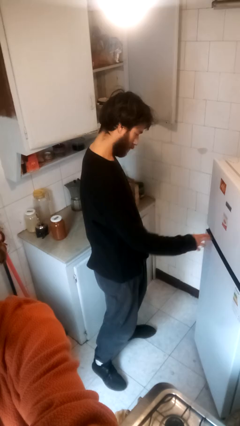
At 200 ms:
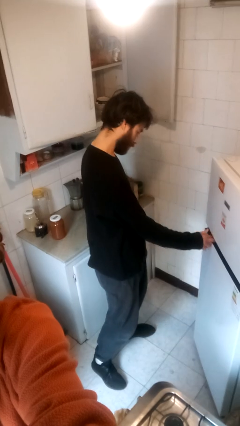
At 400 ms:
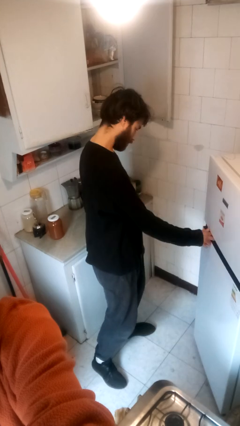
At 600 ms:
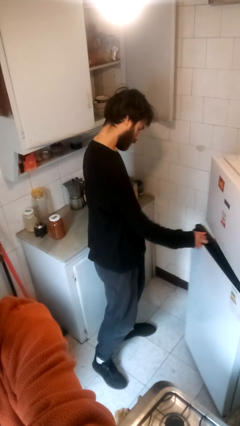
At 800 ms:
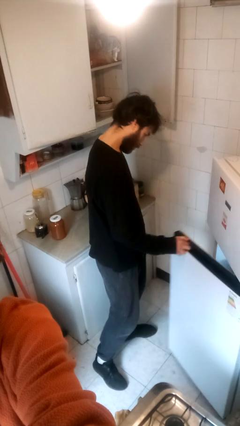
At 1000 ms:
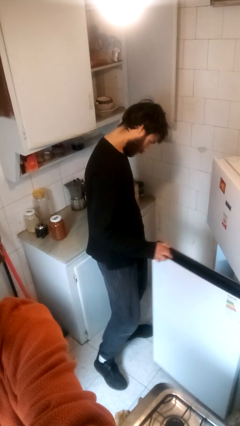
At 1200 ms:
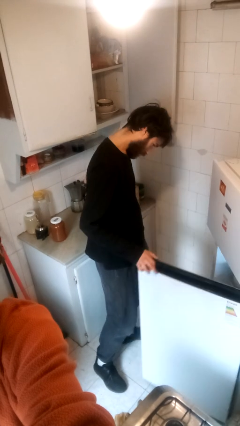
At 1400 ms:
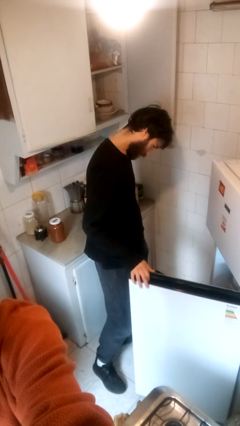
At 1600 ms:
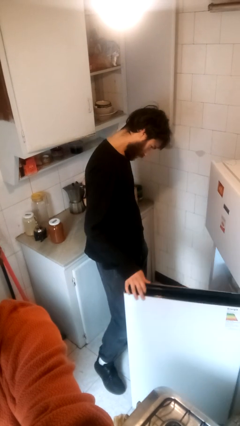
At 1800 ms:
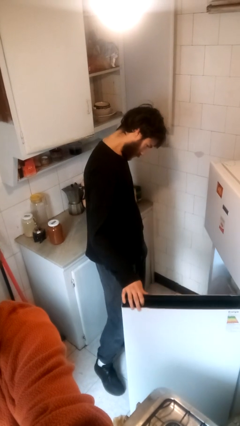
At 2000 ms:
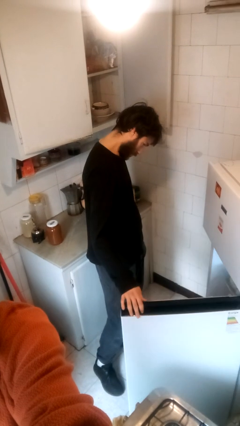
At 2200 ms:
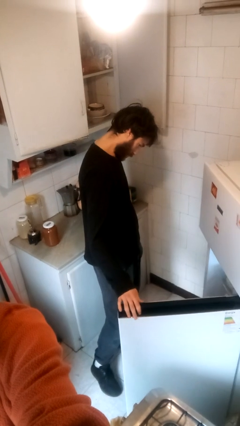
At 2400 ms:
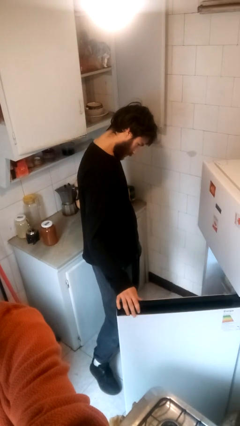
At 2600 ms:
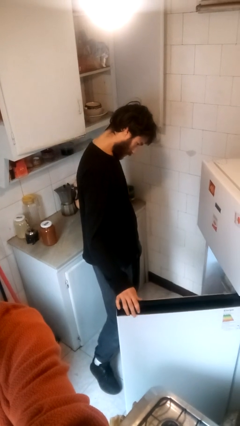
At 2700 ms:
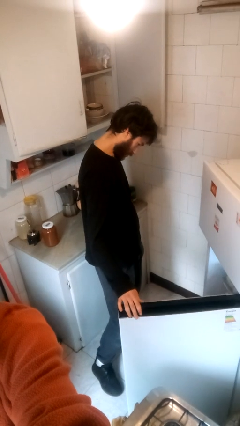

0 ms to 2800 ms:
person opens refrigerator

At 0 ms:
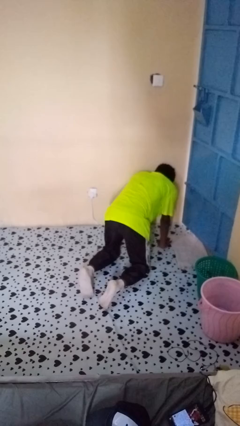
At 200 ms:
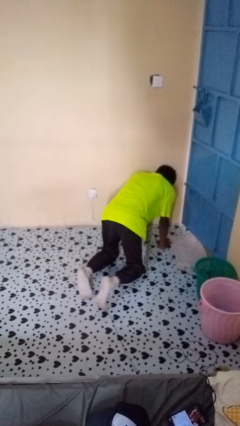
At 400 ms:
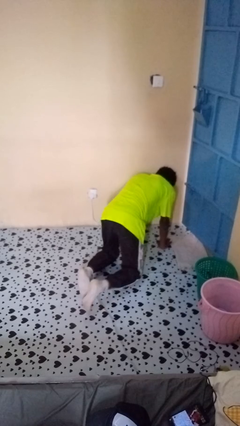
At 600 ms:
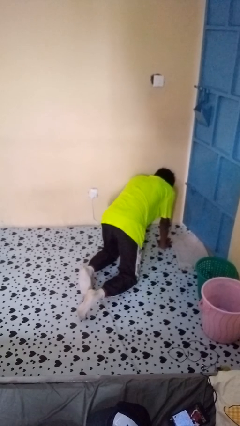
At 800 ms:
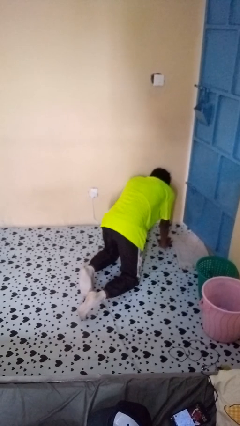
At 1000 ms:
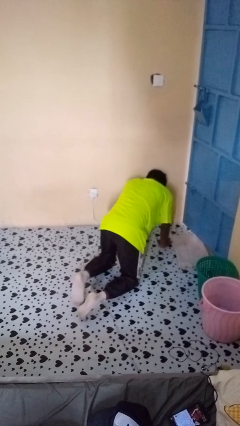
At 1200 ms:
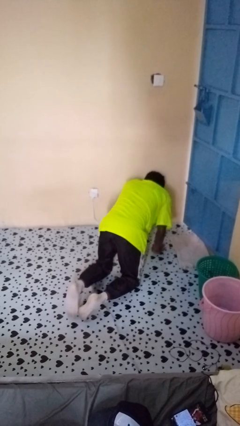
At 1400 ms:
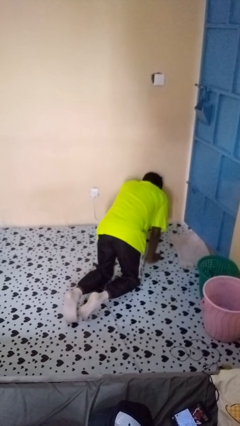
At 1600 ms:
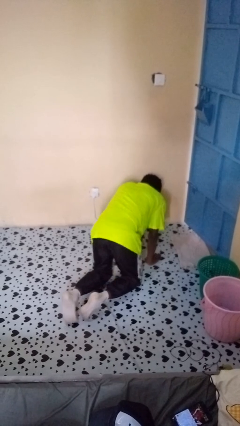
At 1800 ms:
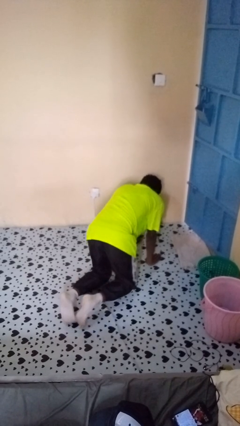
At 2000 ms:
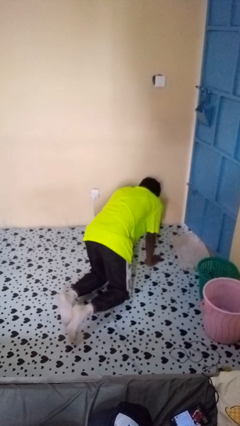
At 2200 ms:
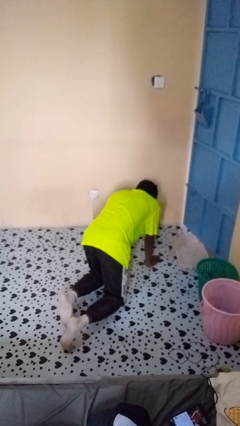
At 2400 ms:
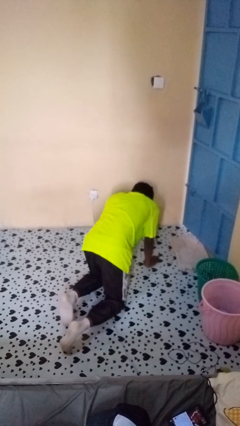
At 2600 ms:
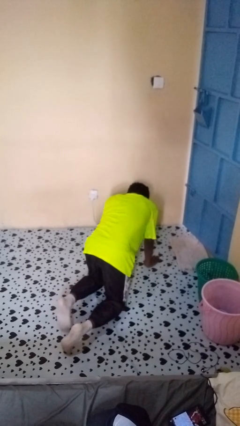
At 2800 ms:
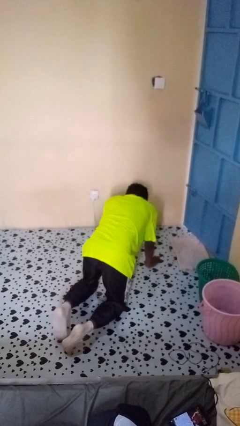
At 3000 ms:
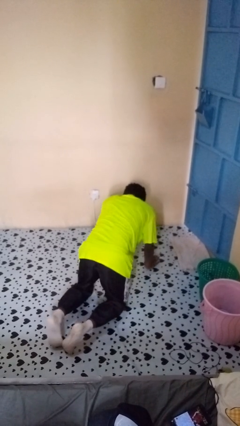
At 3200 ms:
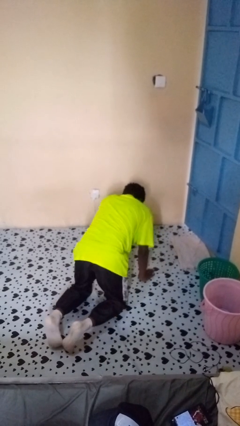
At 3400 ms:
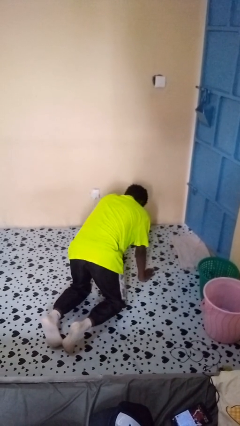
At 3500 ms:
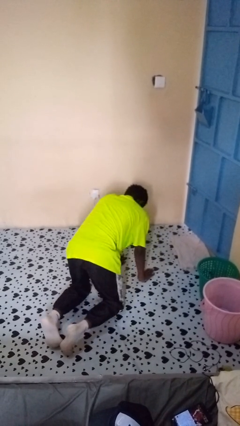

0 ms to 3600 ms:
person crawls

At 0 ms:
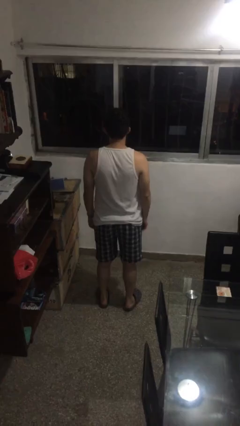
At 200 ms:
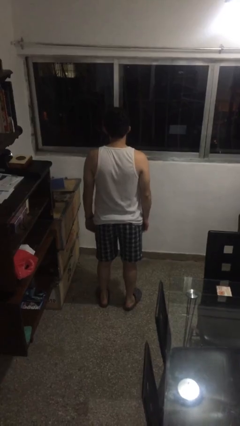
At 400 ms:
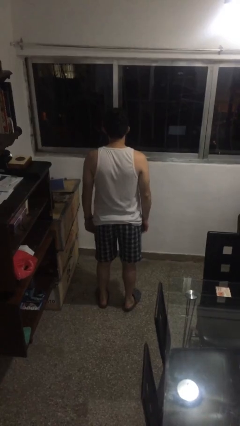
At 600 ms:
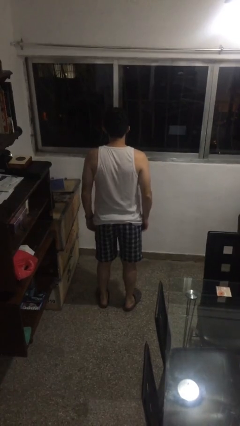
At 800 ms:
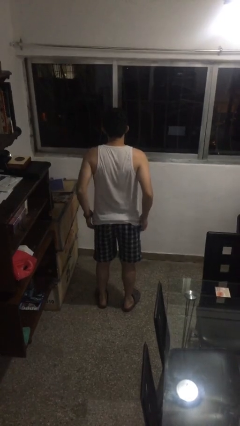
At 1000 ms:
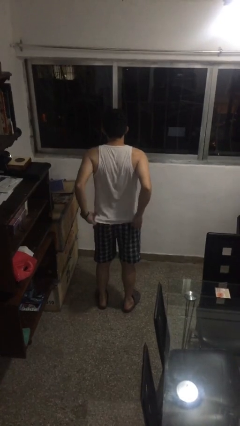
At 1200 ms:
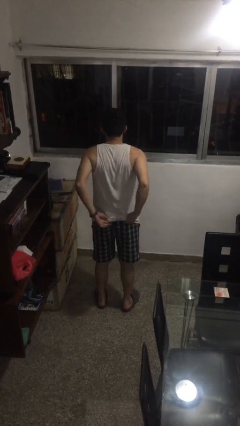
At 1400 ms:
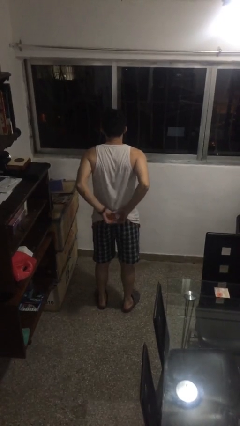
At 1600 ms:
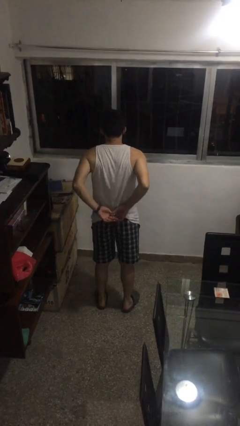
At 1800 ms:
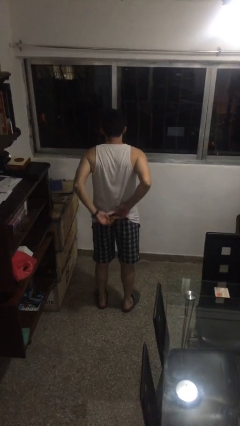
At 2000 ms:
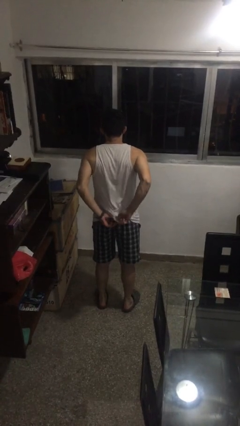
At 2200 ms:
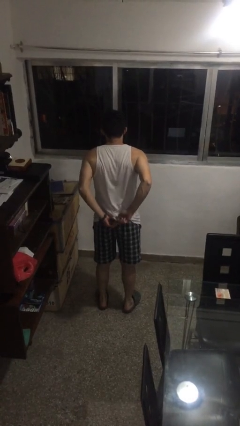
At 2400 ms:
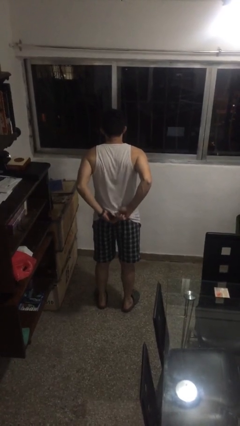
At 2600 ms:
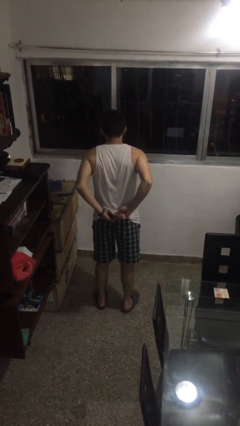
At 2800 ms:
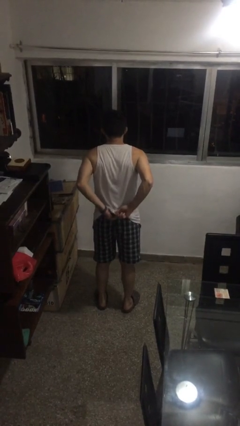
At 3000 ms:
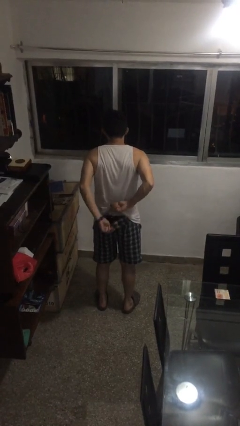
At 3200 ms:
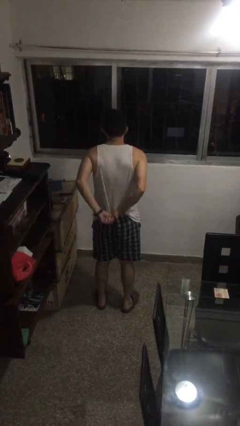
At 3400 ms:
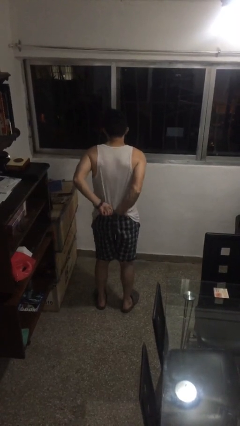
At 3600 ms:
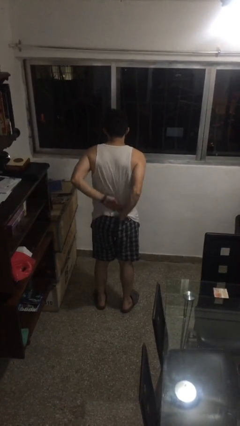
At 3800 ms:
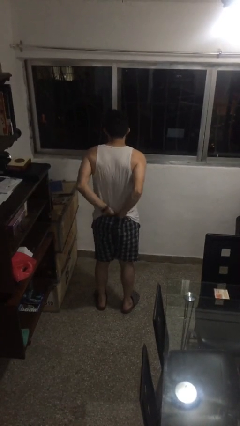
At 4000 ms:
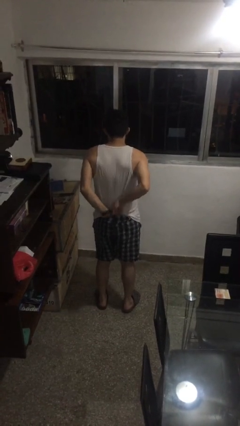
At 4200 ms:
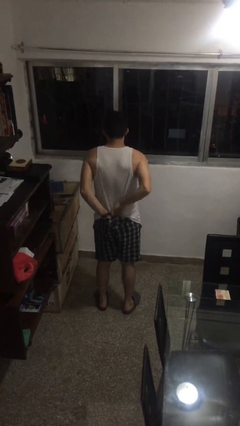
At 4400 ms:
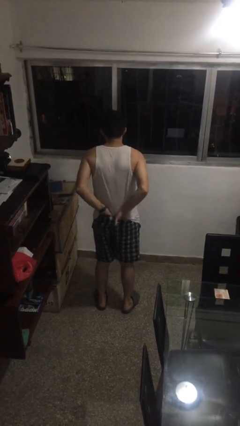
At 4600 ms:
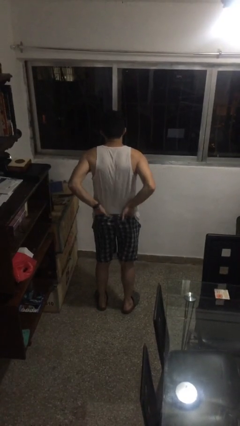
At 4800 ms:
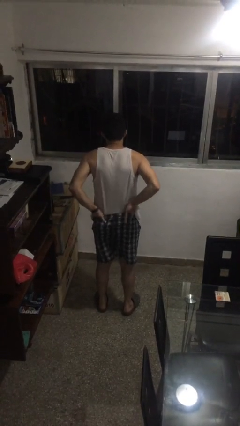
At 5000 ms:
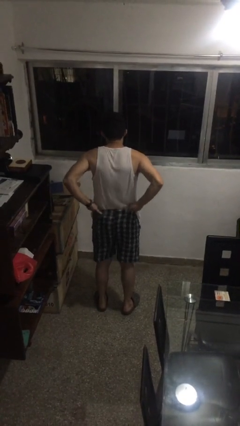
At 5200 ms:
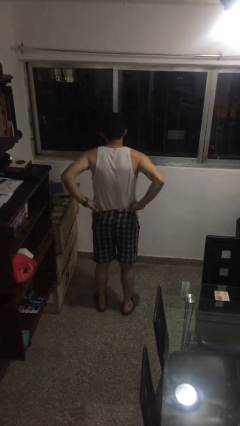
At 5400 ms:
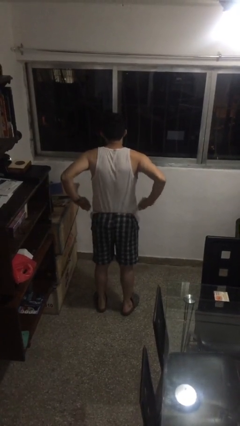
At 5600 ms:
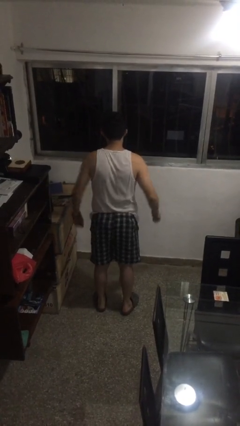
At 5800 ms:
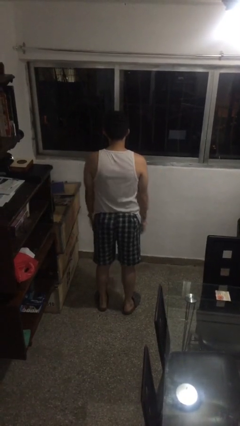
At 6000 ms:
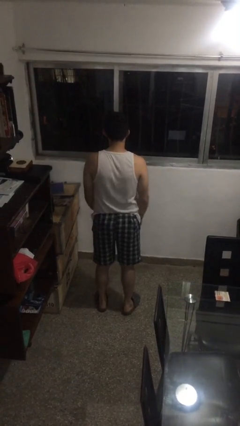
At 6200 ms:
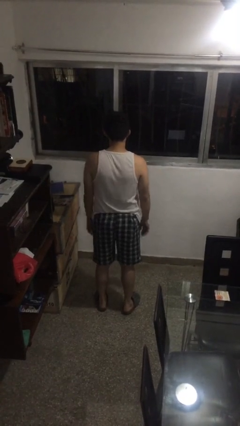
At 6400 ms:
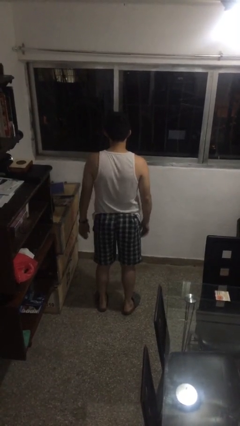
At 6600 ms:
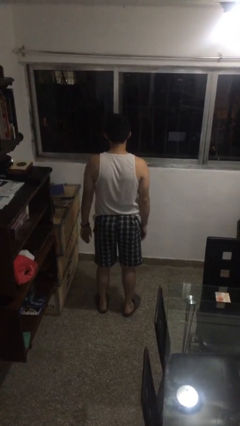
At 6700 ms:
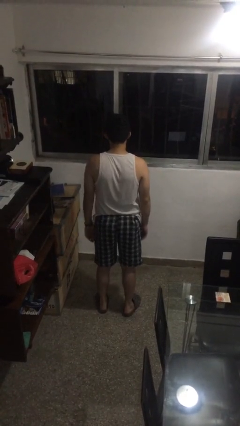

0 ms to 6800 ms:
person tucks in shirt

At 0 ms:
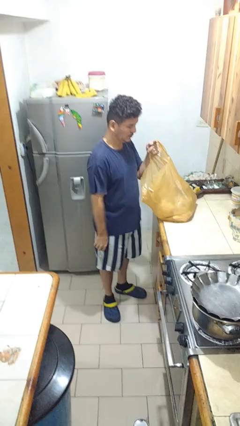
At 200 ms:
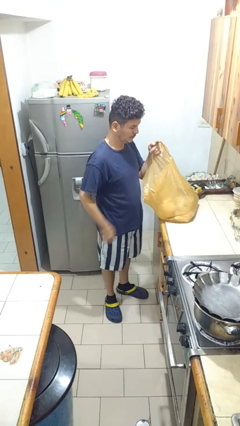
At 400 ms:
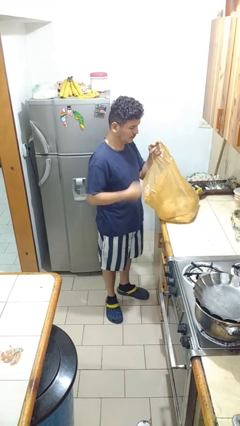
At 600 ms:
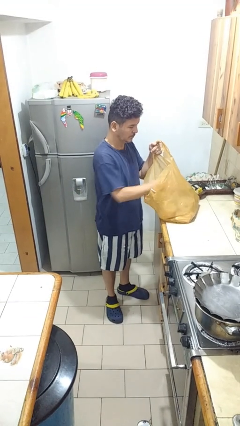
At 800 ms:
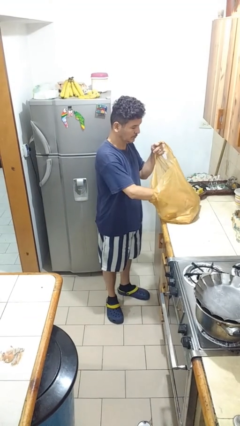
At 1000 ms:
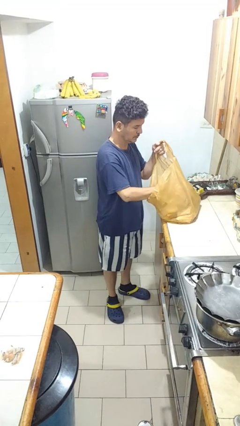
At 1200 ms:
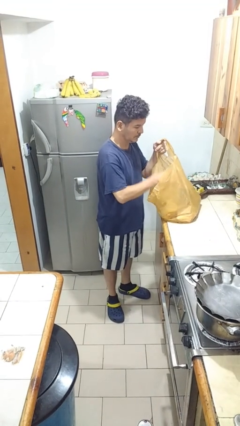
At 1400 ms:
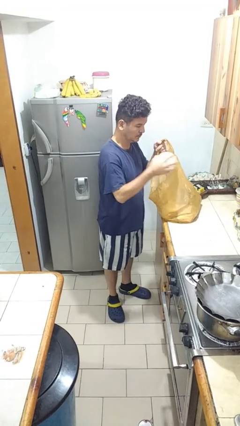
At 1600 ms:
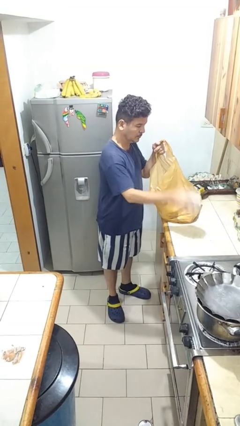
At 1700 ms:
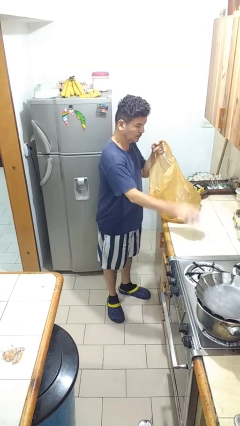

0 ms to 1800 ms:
person takes object from bag

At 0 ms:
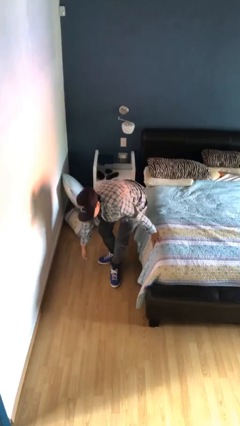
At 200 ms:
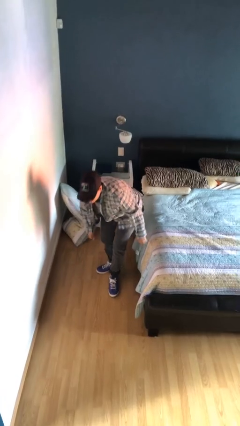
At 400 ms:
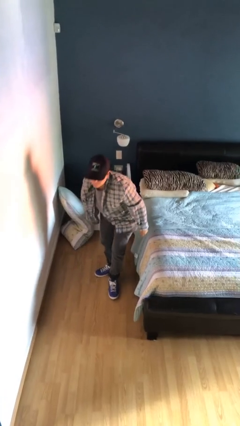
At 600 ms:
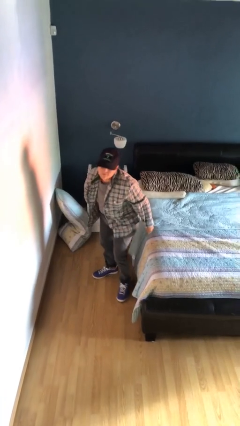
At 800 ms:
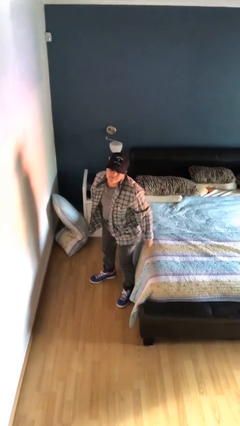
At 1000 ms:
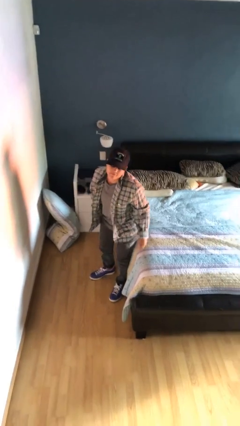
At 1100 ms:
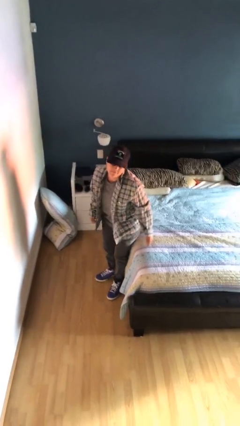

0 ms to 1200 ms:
person stands up from floor

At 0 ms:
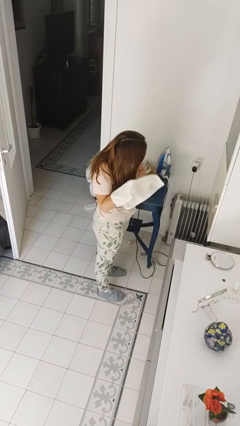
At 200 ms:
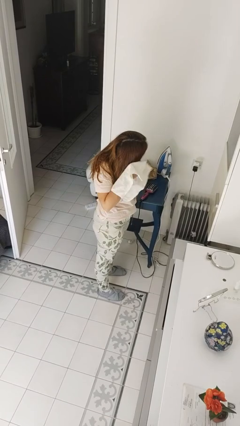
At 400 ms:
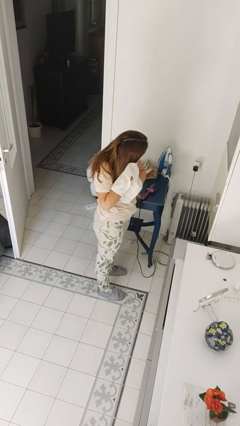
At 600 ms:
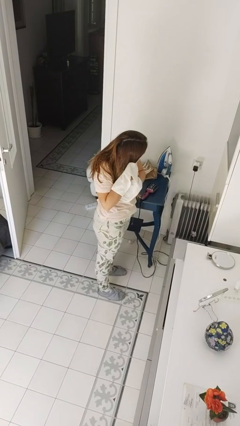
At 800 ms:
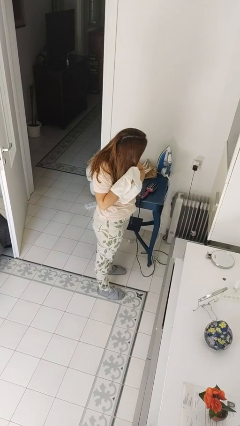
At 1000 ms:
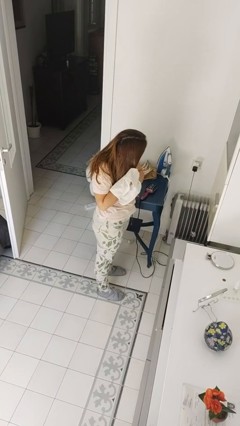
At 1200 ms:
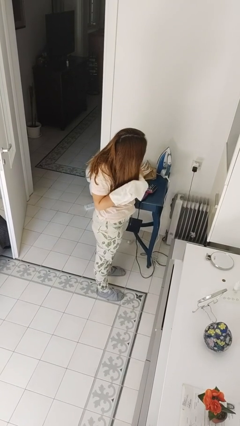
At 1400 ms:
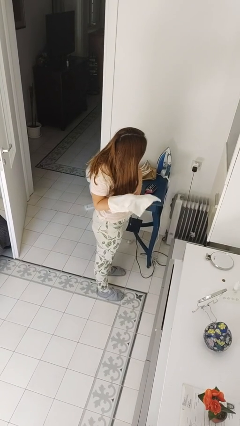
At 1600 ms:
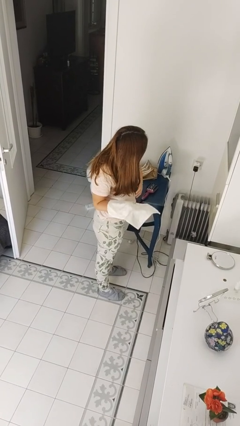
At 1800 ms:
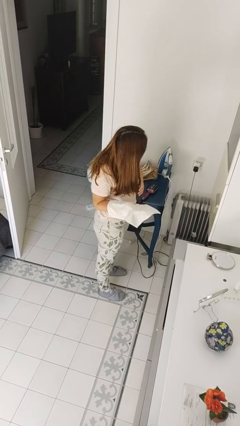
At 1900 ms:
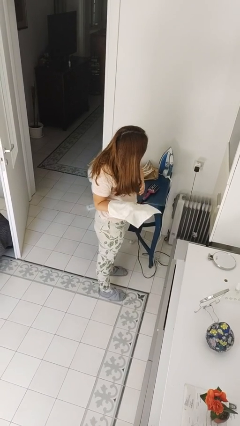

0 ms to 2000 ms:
person dries hair with towel
